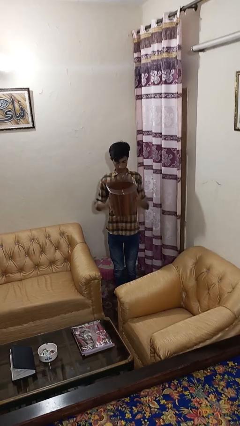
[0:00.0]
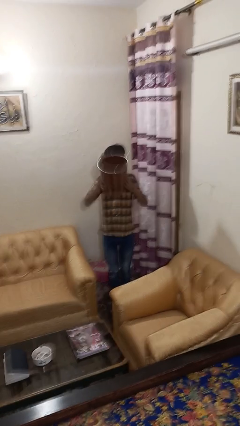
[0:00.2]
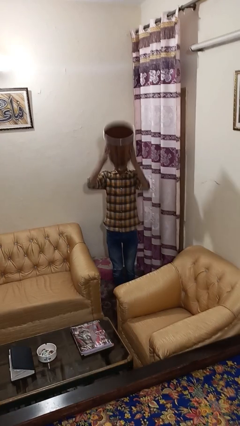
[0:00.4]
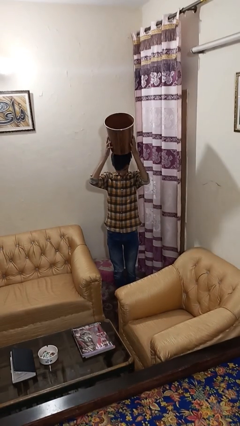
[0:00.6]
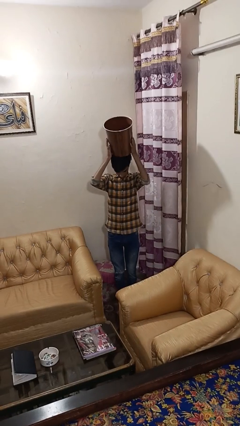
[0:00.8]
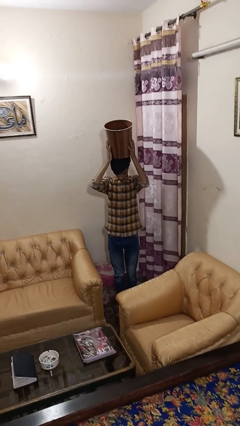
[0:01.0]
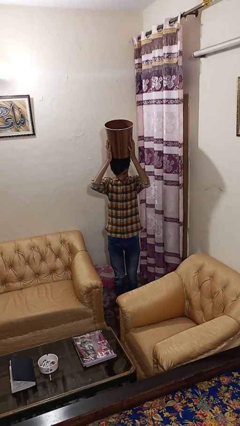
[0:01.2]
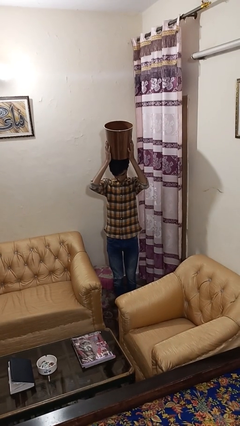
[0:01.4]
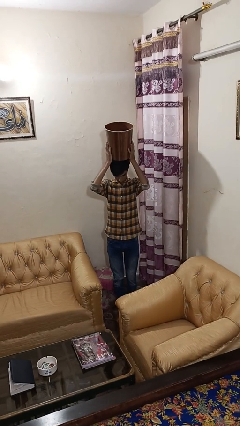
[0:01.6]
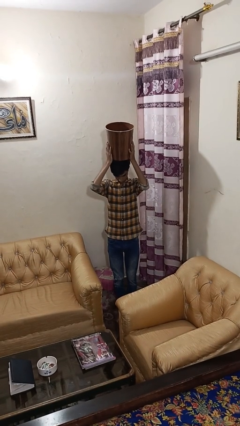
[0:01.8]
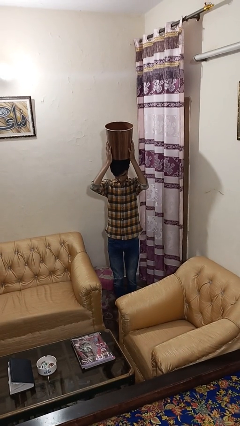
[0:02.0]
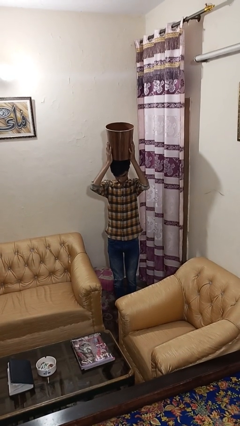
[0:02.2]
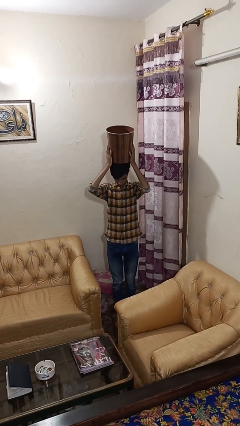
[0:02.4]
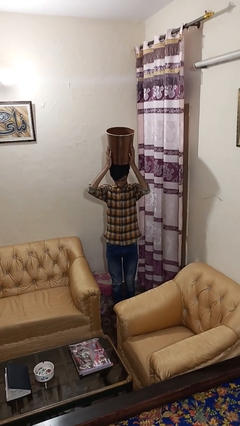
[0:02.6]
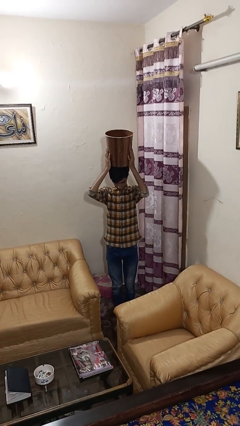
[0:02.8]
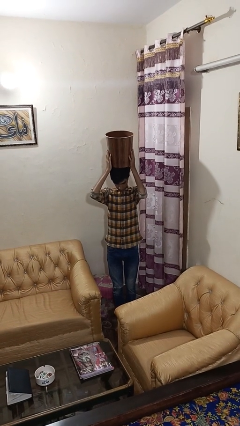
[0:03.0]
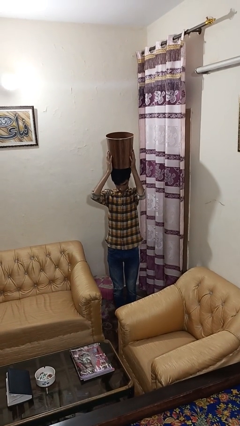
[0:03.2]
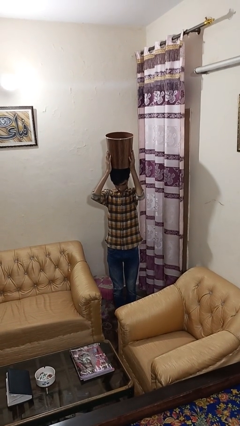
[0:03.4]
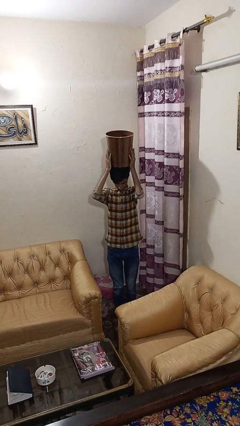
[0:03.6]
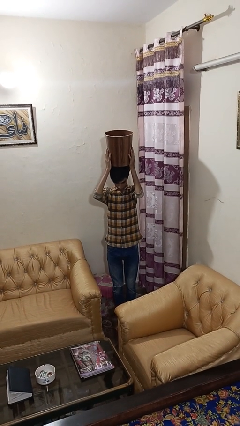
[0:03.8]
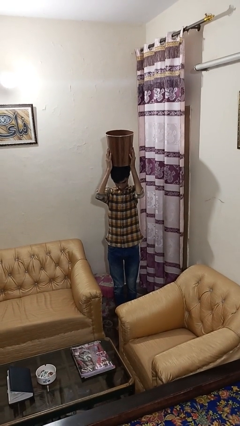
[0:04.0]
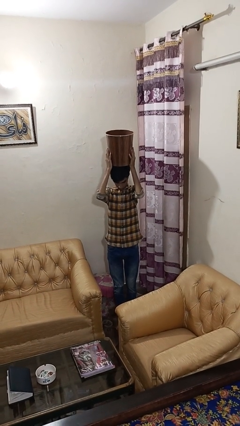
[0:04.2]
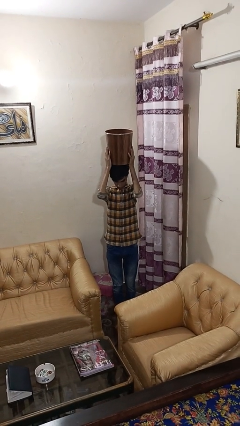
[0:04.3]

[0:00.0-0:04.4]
person holds object above head

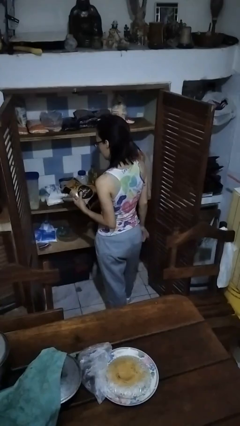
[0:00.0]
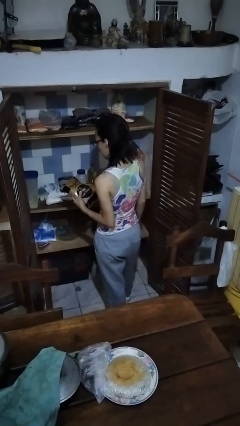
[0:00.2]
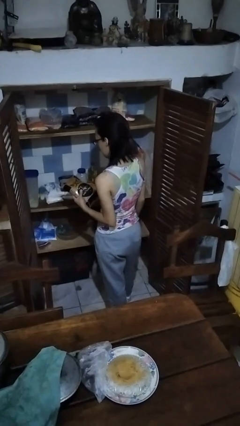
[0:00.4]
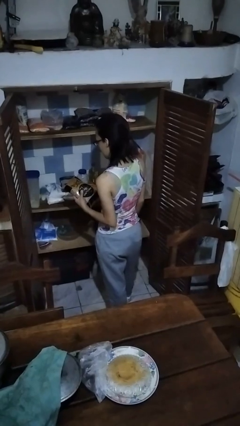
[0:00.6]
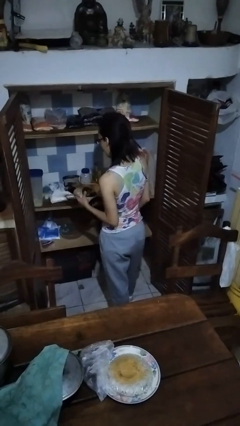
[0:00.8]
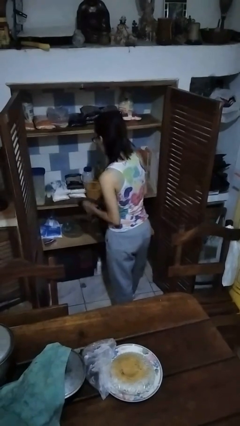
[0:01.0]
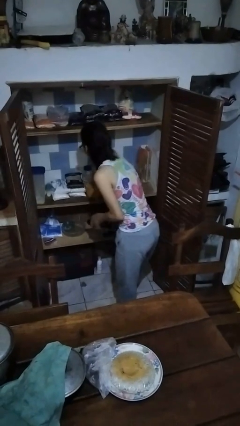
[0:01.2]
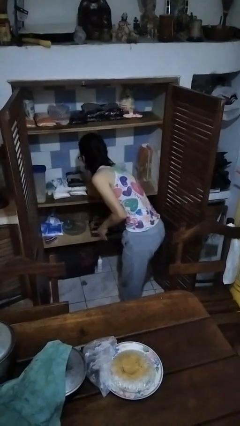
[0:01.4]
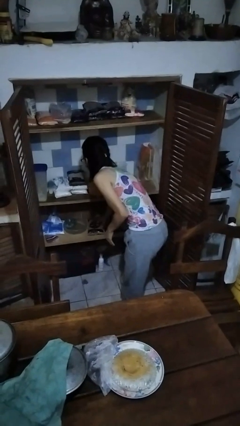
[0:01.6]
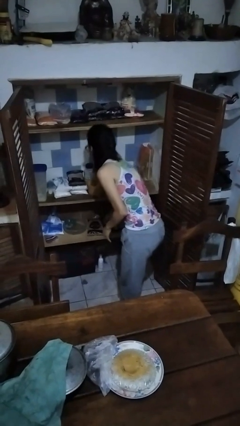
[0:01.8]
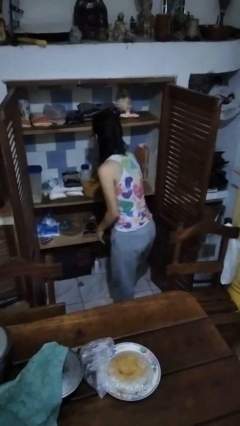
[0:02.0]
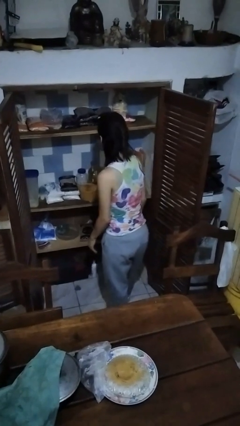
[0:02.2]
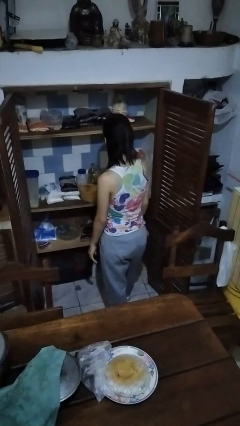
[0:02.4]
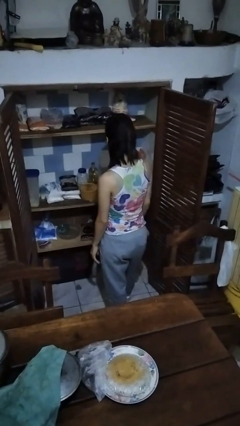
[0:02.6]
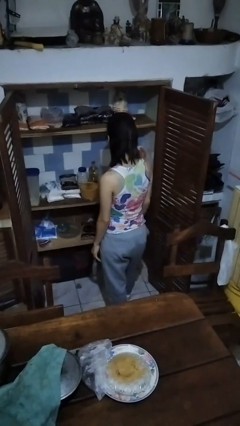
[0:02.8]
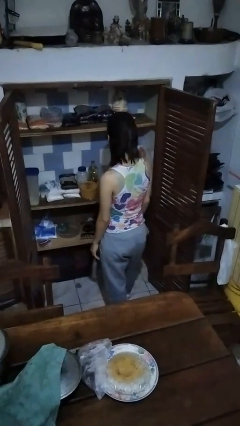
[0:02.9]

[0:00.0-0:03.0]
person puts object in cabinet

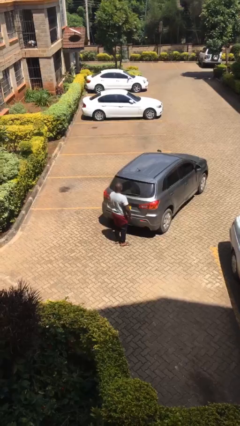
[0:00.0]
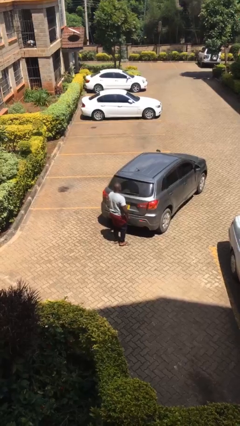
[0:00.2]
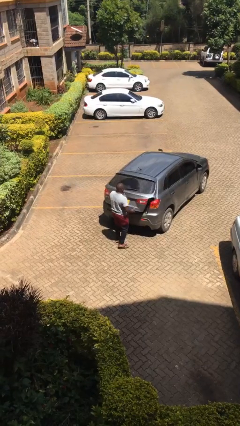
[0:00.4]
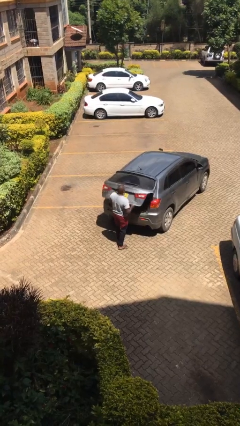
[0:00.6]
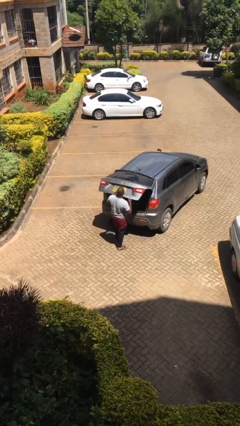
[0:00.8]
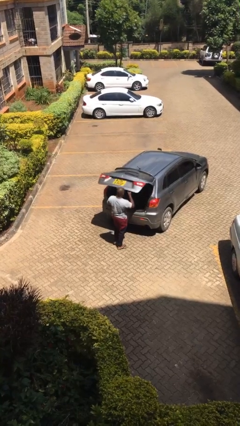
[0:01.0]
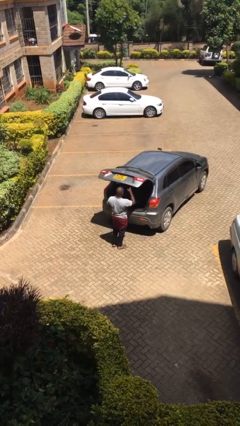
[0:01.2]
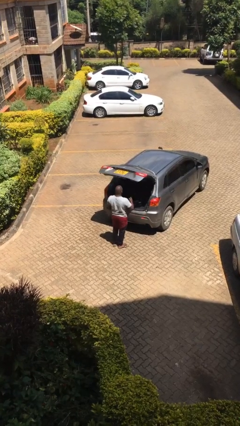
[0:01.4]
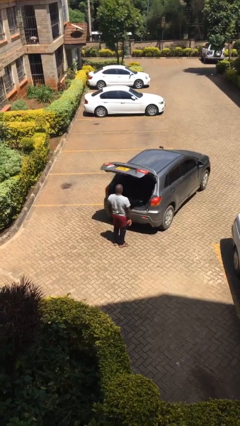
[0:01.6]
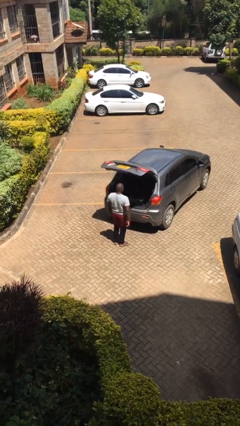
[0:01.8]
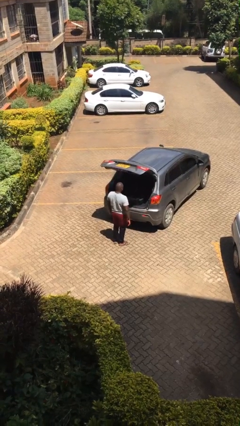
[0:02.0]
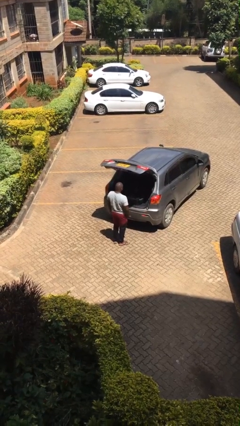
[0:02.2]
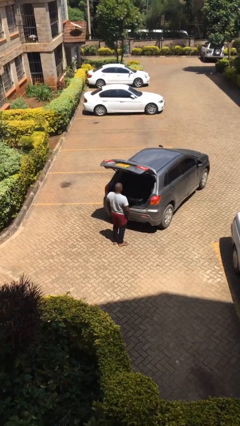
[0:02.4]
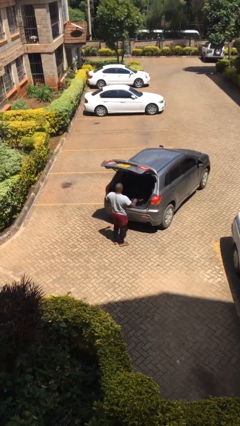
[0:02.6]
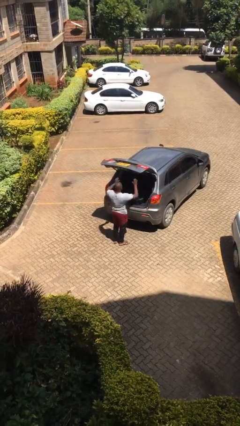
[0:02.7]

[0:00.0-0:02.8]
person opens car trunk

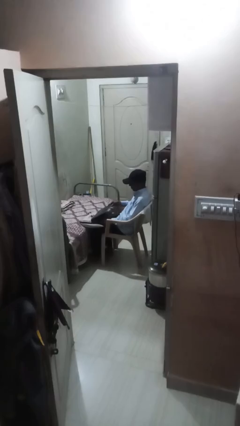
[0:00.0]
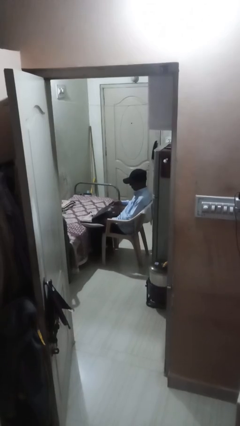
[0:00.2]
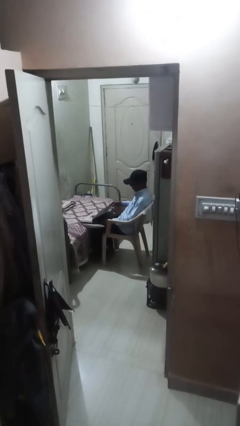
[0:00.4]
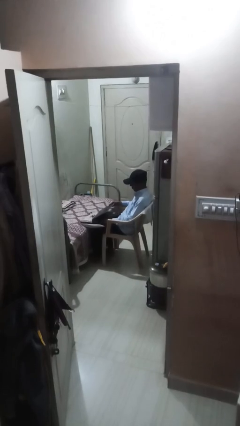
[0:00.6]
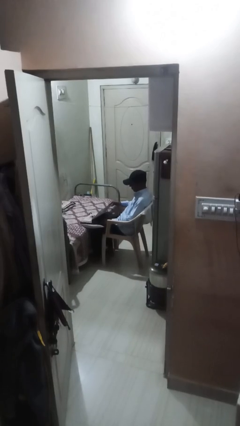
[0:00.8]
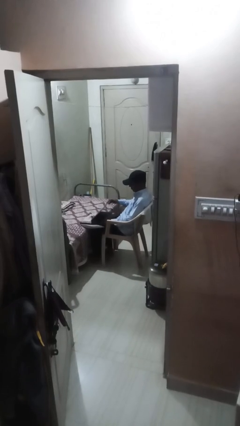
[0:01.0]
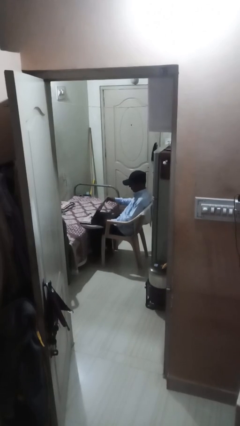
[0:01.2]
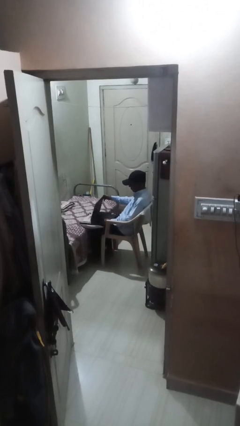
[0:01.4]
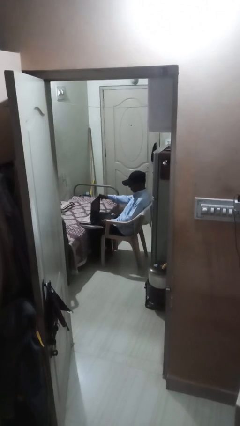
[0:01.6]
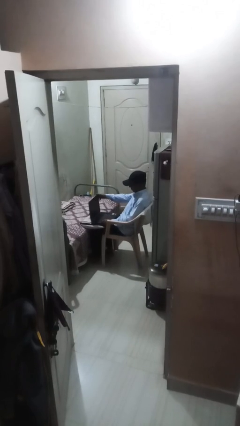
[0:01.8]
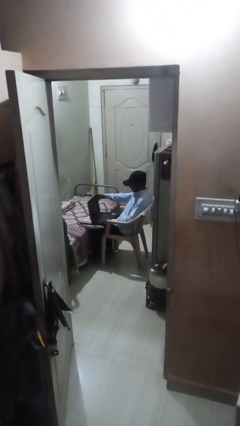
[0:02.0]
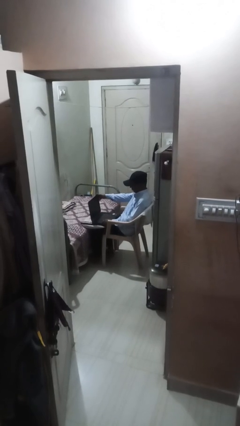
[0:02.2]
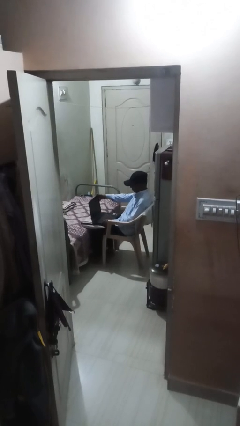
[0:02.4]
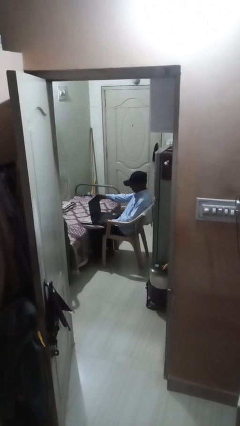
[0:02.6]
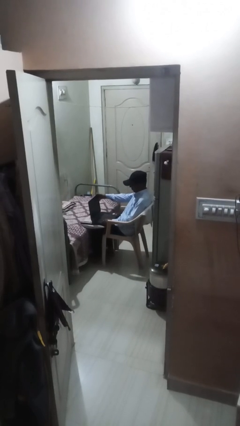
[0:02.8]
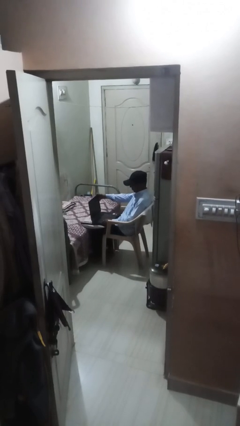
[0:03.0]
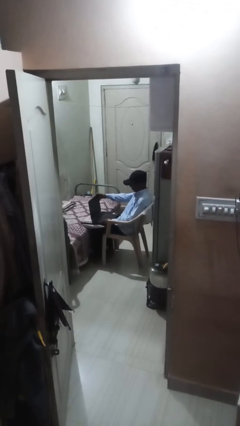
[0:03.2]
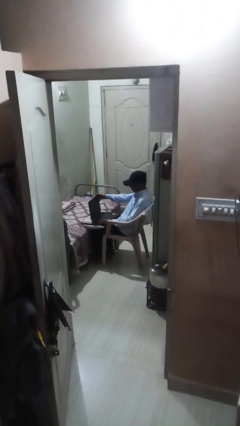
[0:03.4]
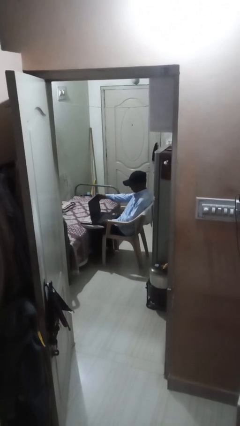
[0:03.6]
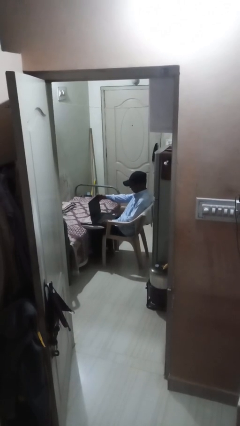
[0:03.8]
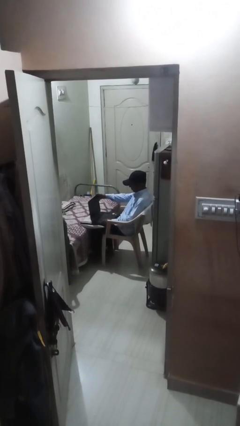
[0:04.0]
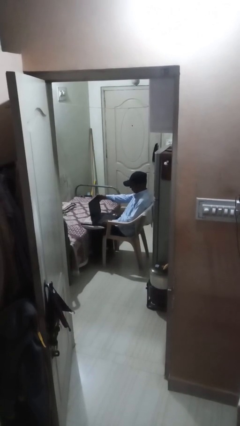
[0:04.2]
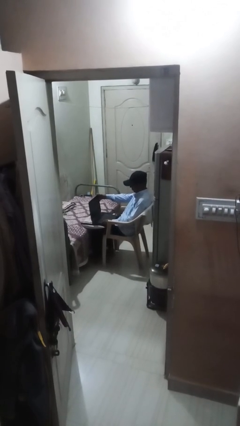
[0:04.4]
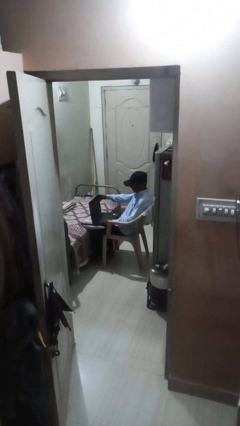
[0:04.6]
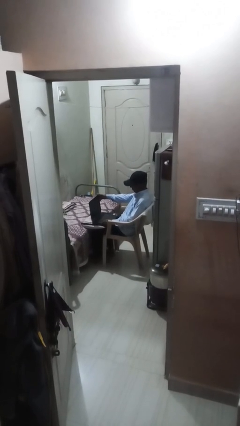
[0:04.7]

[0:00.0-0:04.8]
person interacts with laptop

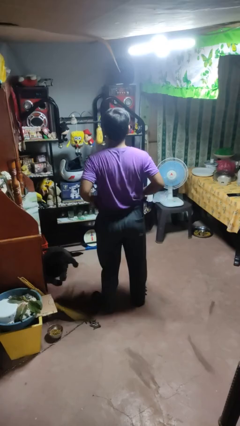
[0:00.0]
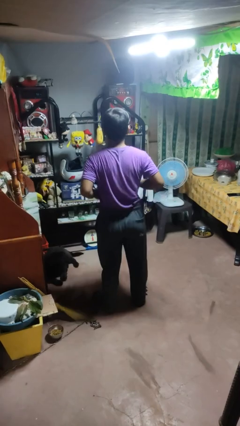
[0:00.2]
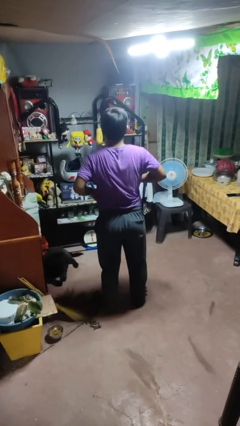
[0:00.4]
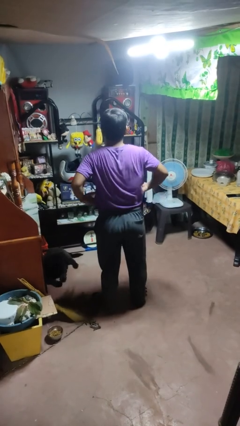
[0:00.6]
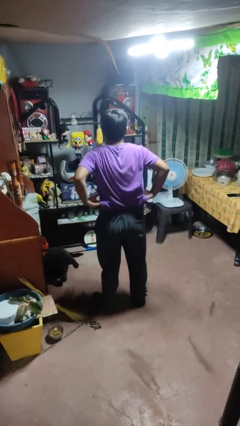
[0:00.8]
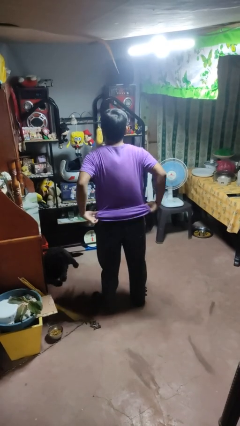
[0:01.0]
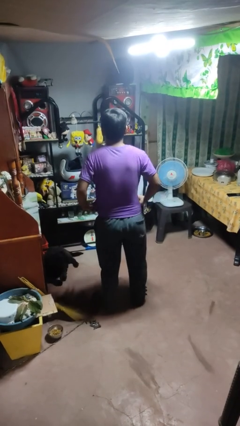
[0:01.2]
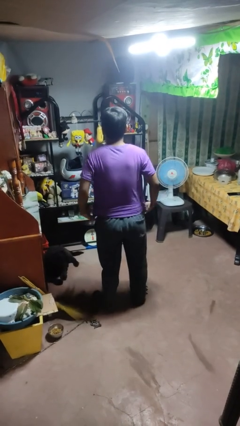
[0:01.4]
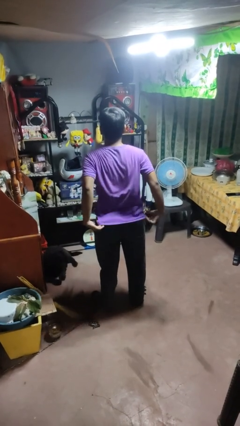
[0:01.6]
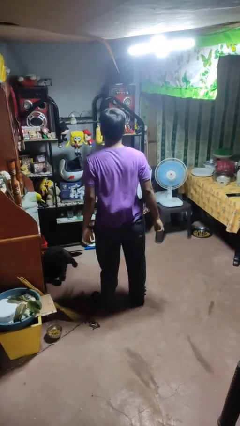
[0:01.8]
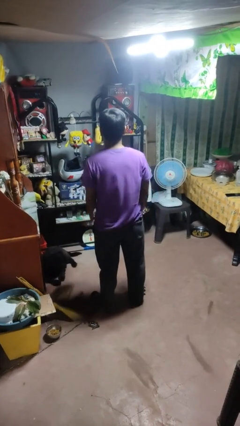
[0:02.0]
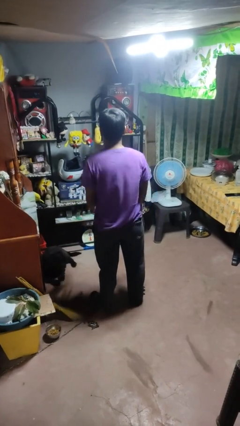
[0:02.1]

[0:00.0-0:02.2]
person untucks shirt

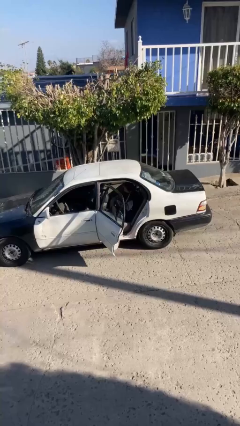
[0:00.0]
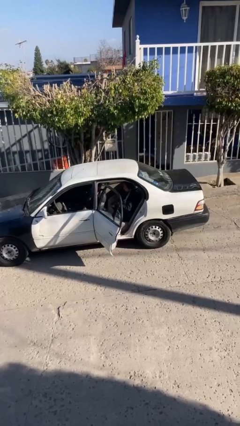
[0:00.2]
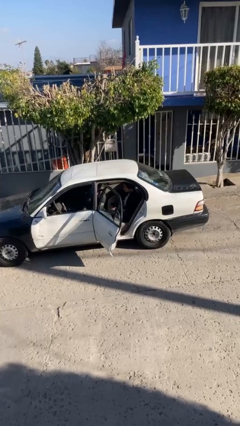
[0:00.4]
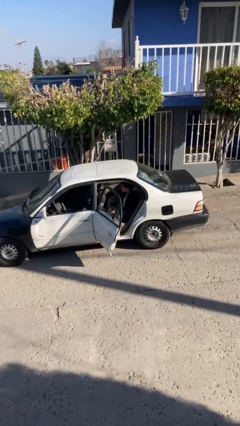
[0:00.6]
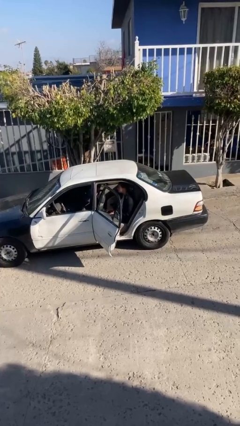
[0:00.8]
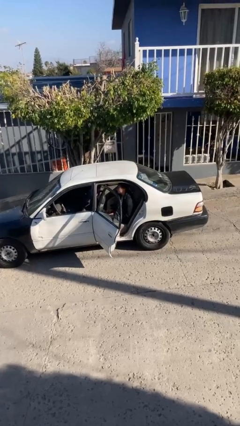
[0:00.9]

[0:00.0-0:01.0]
person enters car
